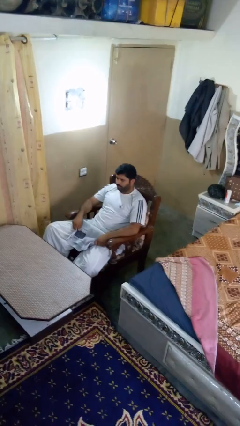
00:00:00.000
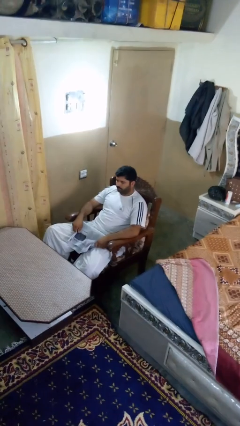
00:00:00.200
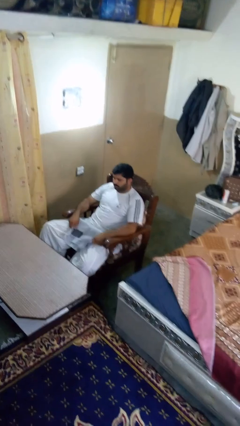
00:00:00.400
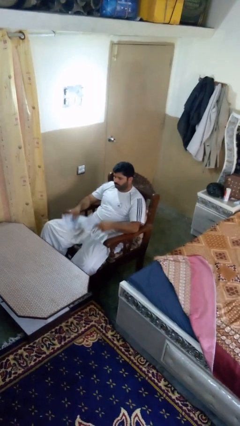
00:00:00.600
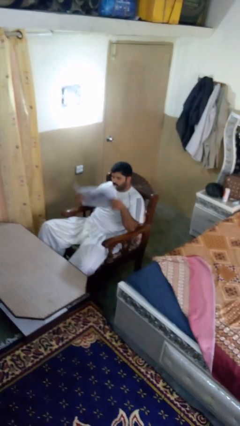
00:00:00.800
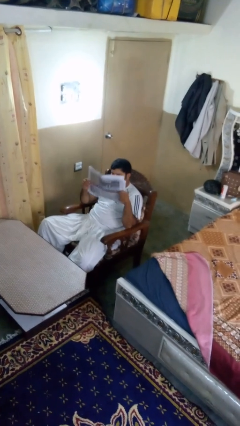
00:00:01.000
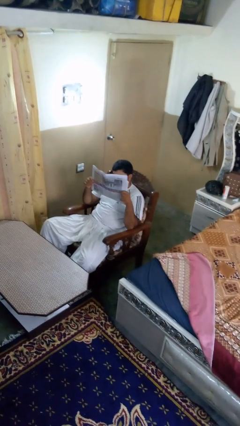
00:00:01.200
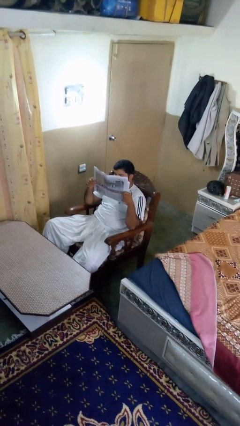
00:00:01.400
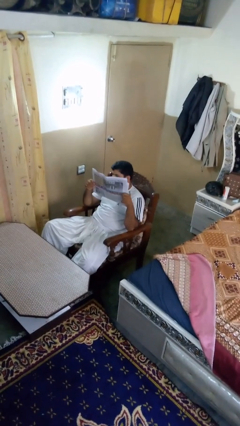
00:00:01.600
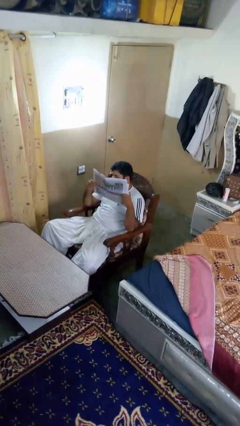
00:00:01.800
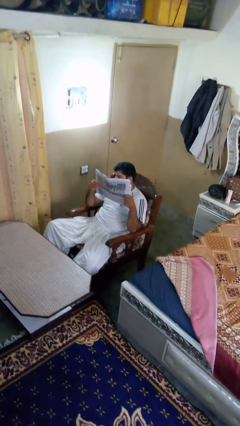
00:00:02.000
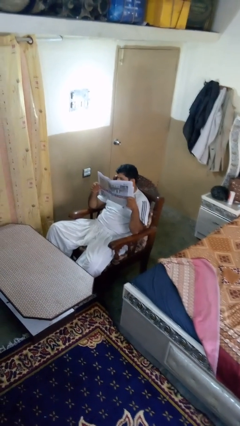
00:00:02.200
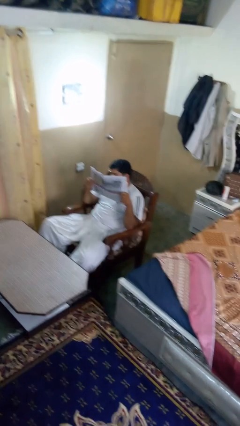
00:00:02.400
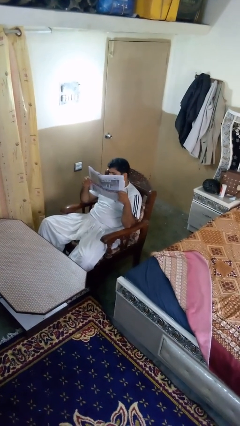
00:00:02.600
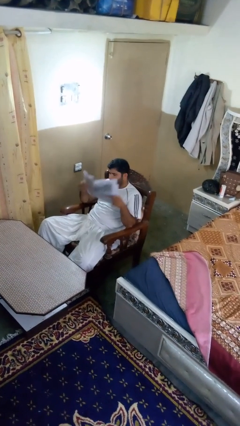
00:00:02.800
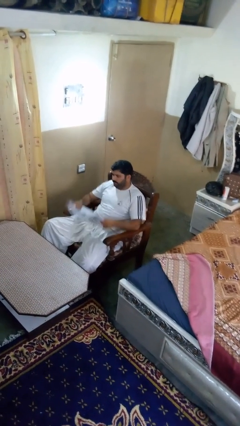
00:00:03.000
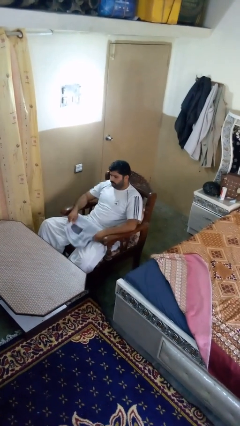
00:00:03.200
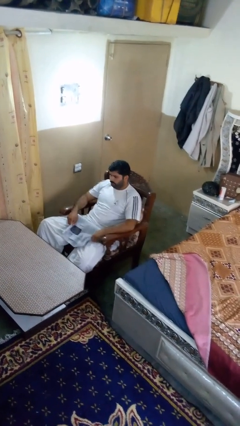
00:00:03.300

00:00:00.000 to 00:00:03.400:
person reads newspaper

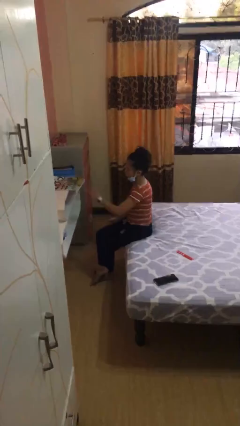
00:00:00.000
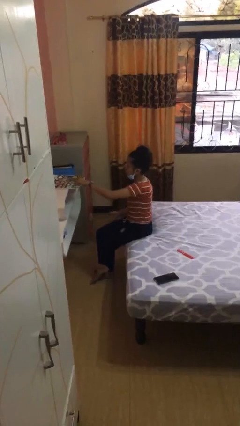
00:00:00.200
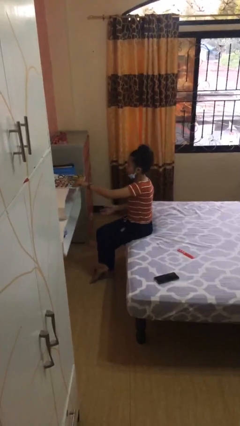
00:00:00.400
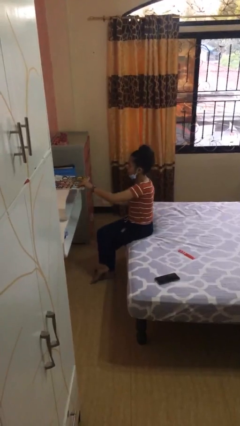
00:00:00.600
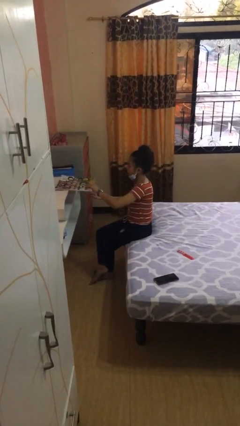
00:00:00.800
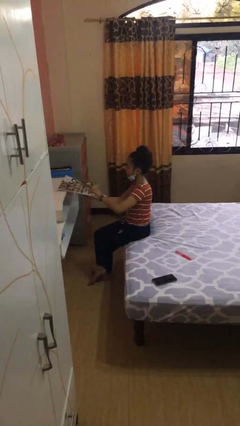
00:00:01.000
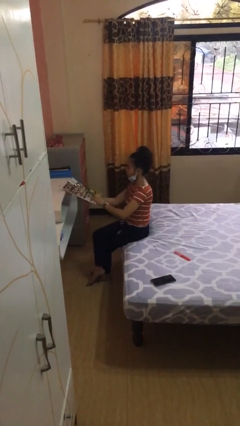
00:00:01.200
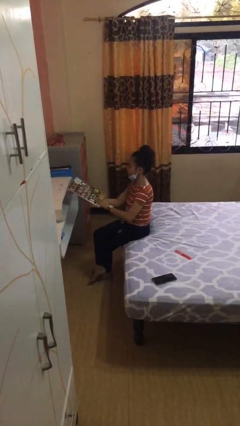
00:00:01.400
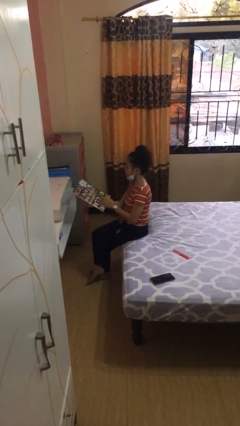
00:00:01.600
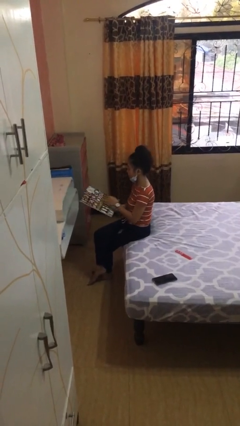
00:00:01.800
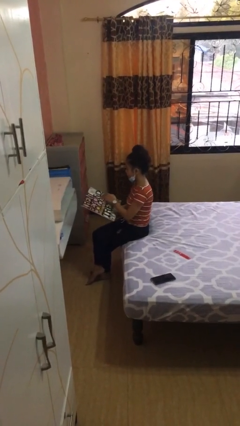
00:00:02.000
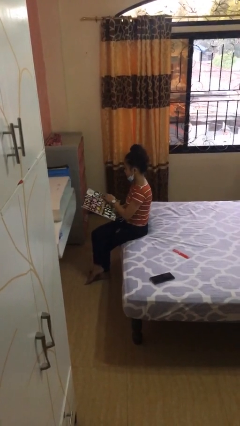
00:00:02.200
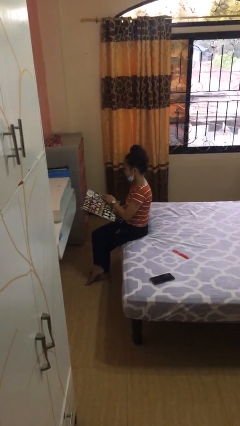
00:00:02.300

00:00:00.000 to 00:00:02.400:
person picks up object from table

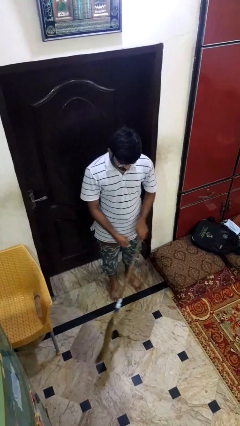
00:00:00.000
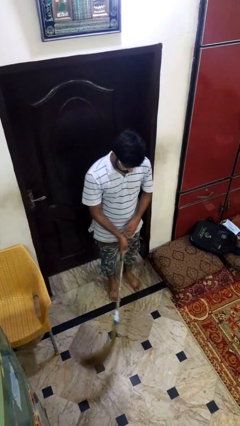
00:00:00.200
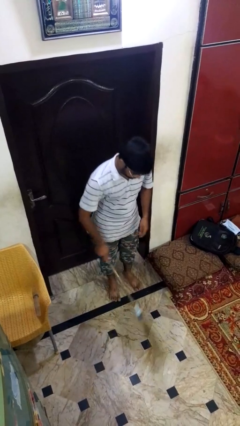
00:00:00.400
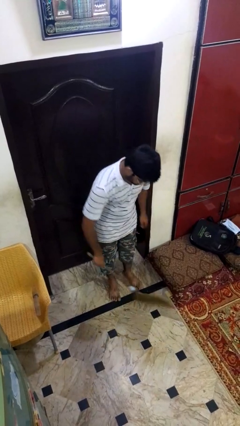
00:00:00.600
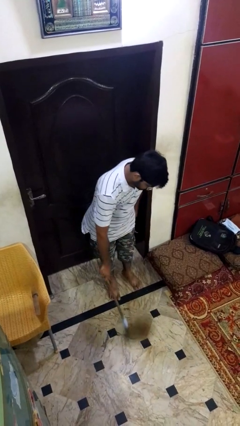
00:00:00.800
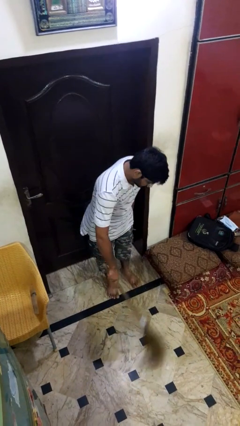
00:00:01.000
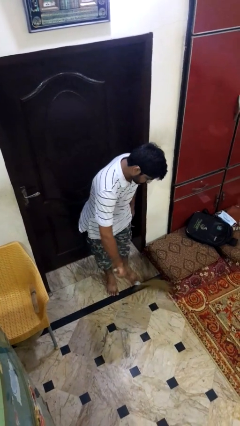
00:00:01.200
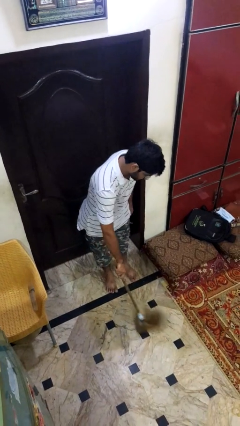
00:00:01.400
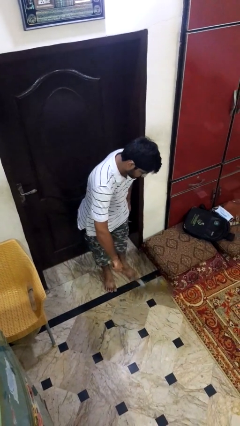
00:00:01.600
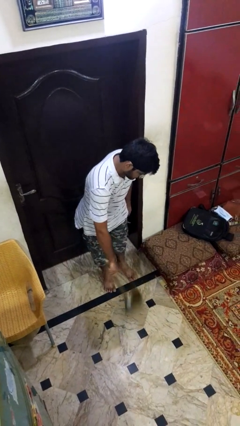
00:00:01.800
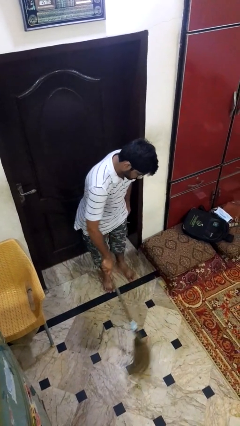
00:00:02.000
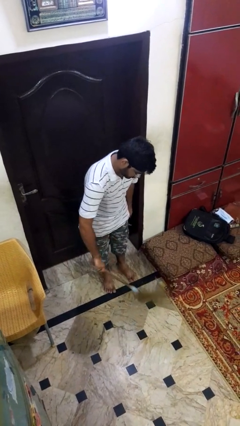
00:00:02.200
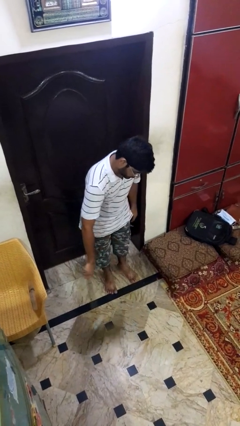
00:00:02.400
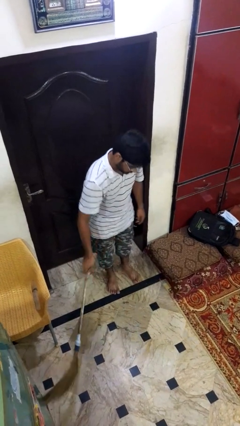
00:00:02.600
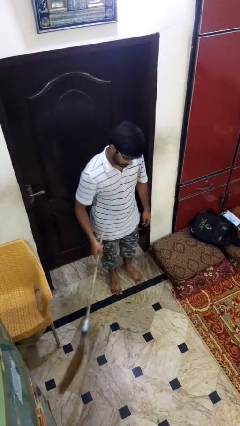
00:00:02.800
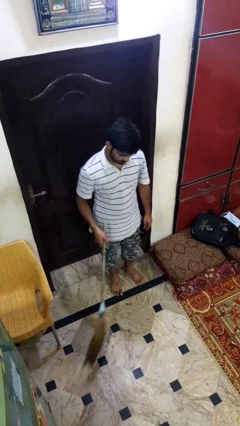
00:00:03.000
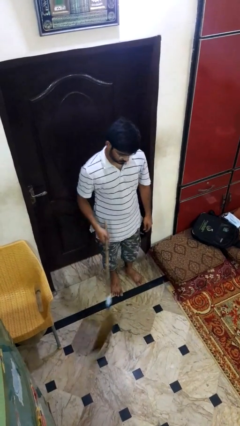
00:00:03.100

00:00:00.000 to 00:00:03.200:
person sweeps floor

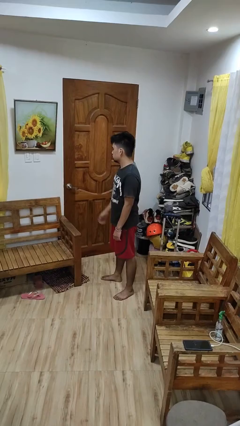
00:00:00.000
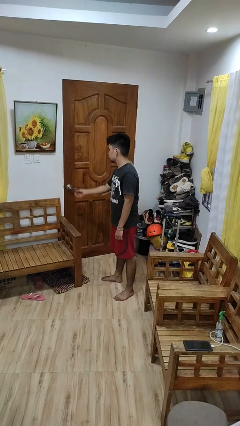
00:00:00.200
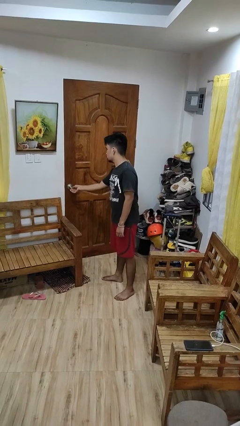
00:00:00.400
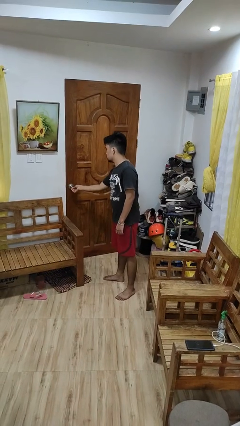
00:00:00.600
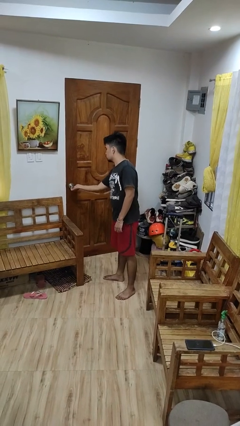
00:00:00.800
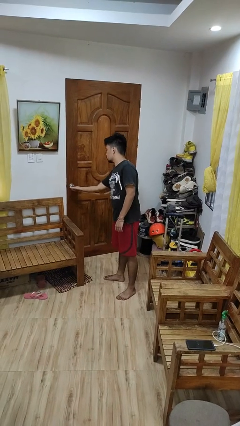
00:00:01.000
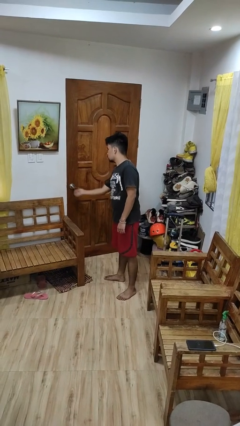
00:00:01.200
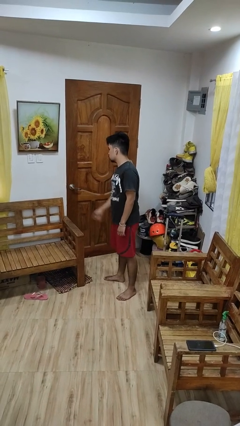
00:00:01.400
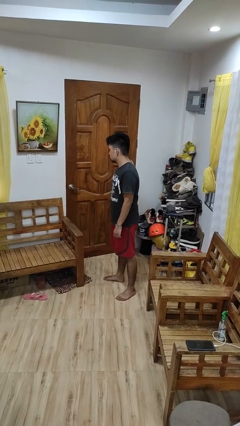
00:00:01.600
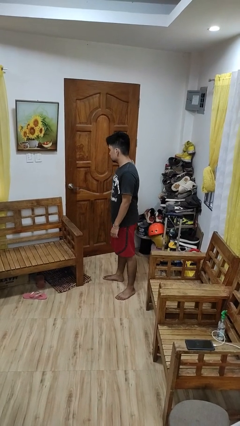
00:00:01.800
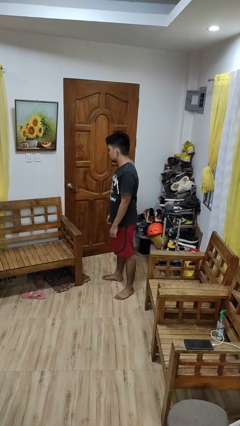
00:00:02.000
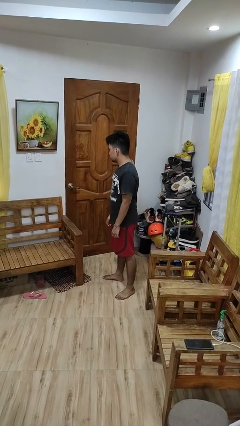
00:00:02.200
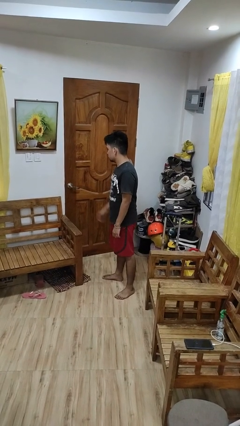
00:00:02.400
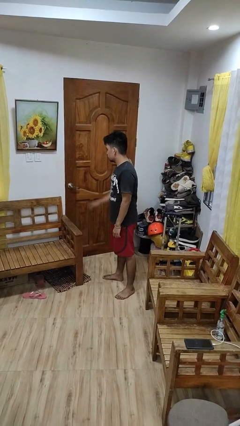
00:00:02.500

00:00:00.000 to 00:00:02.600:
person unlocks door with keys

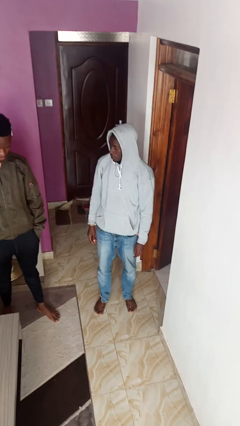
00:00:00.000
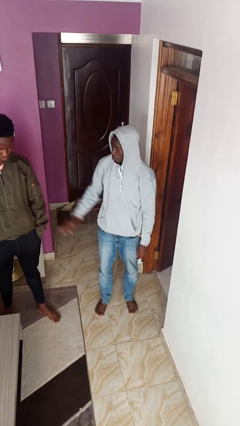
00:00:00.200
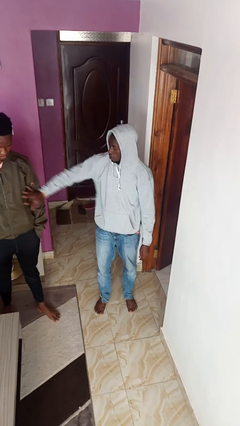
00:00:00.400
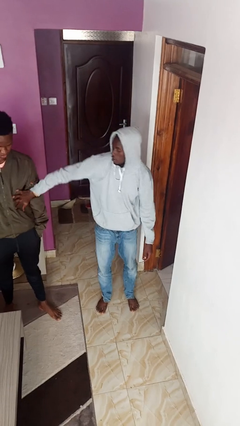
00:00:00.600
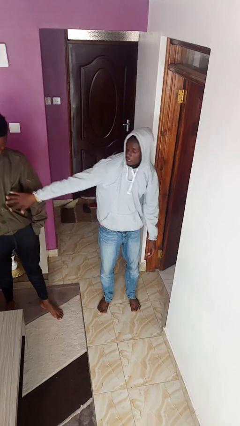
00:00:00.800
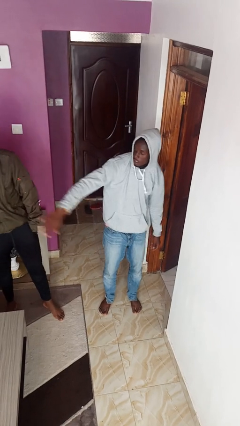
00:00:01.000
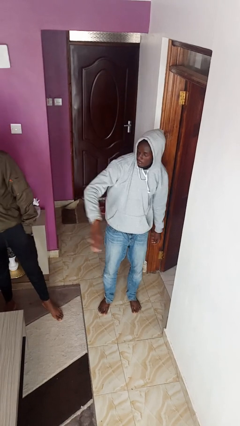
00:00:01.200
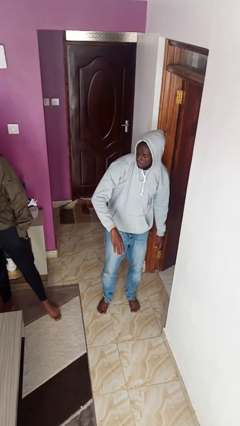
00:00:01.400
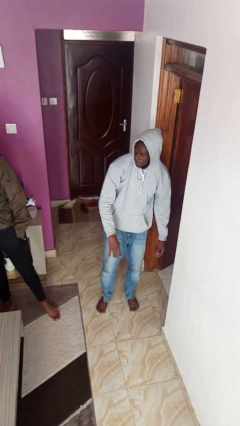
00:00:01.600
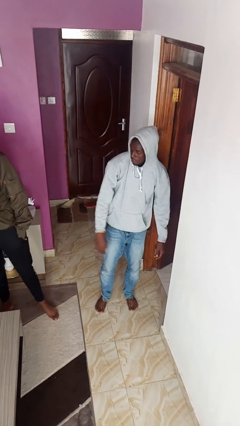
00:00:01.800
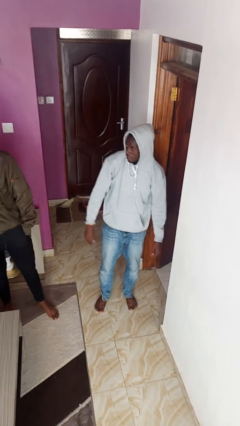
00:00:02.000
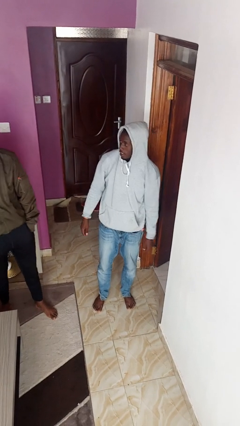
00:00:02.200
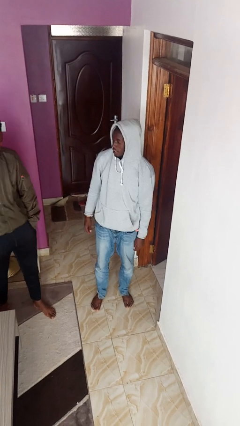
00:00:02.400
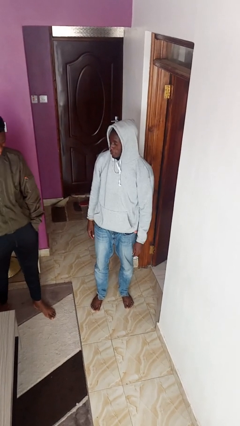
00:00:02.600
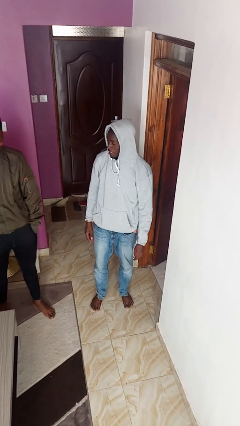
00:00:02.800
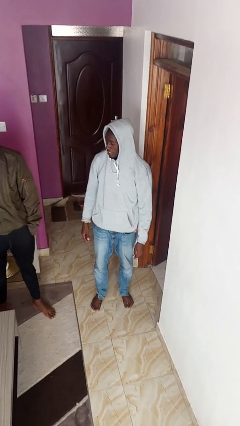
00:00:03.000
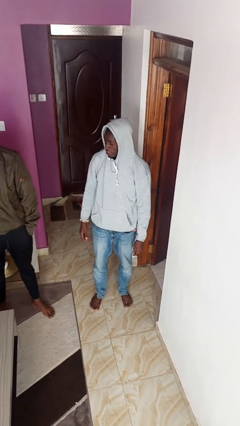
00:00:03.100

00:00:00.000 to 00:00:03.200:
person shoves person

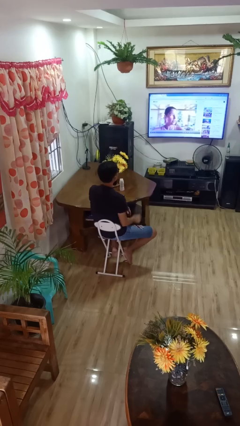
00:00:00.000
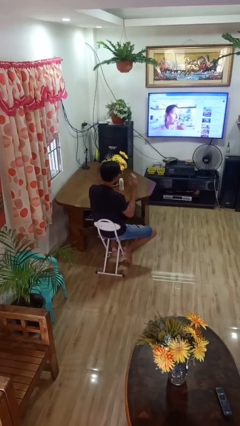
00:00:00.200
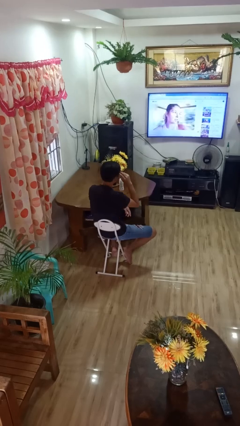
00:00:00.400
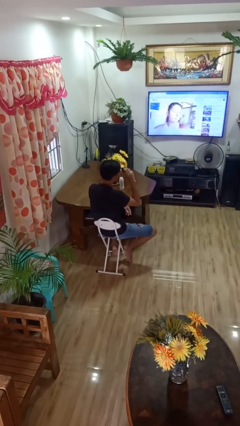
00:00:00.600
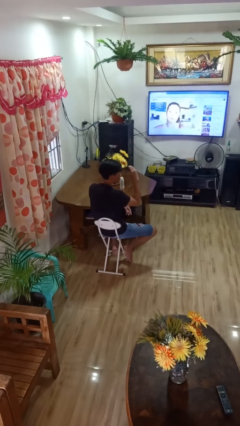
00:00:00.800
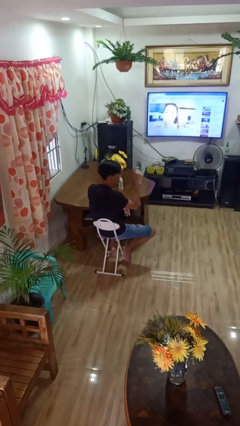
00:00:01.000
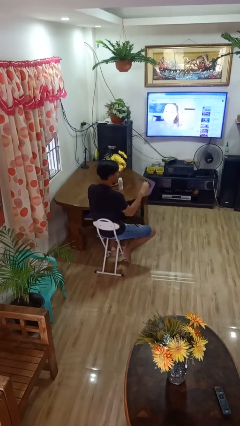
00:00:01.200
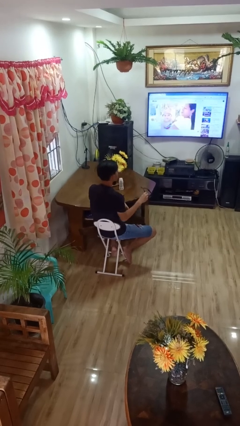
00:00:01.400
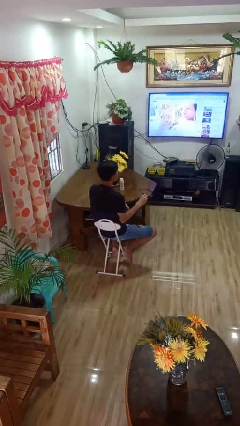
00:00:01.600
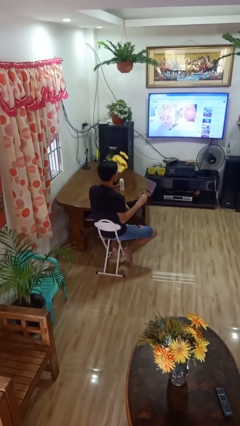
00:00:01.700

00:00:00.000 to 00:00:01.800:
person takes off sunglasses

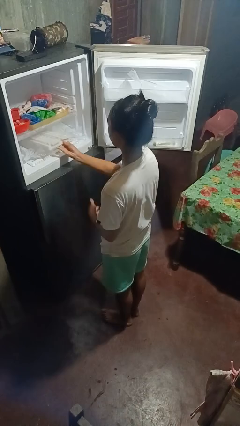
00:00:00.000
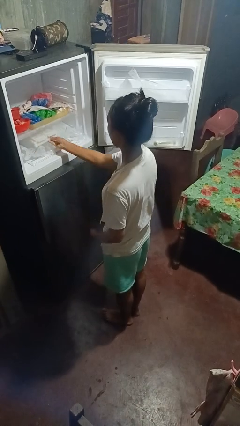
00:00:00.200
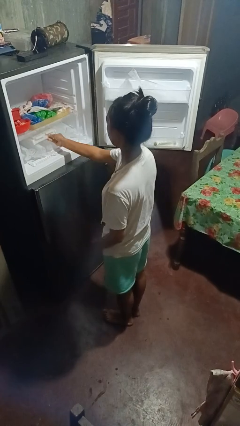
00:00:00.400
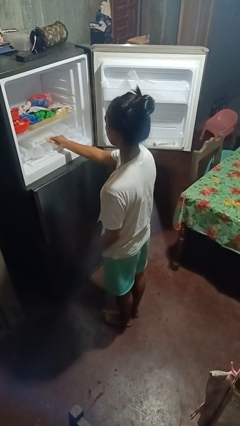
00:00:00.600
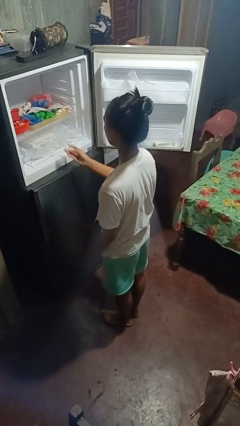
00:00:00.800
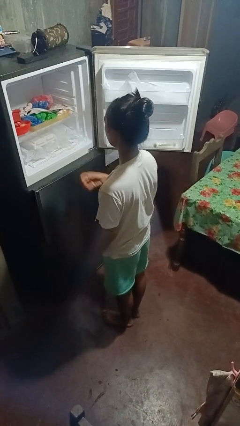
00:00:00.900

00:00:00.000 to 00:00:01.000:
person puts object into refrigerator
